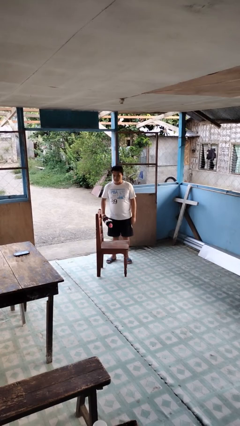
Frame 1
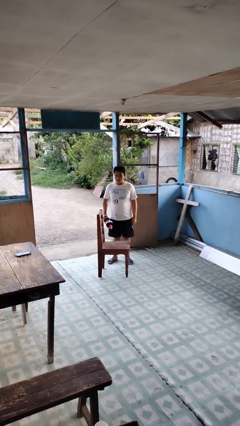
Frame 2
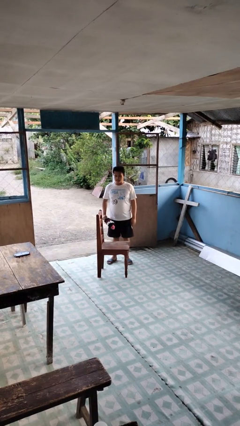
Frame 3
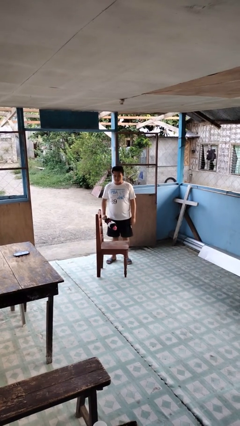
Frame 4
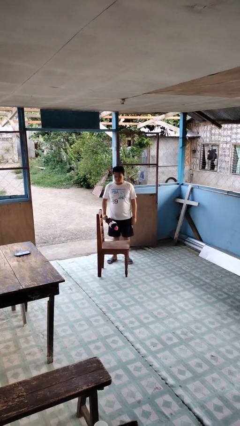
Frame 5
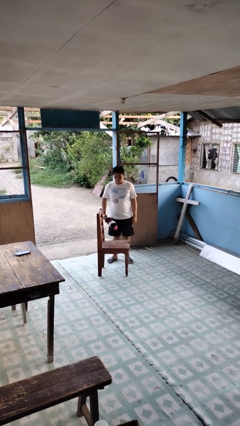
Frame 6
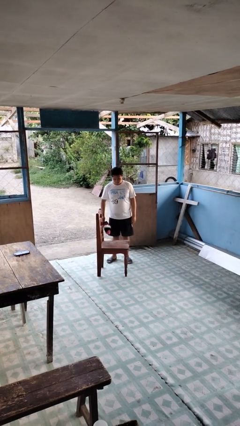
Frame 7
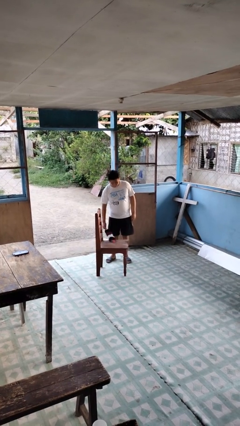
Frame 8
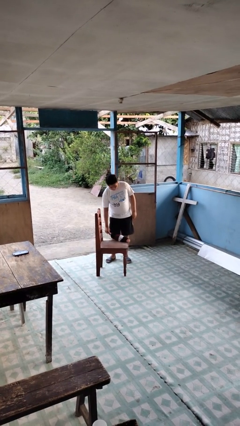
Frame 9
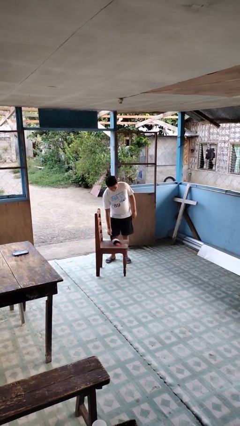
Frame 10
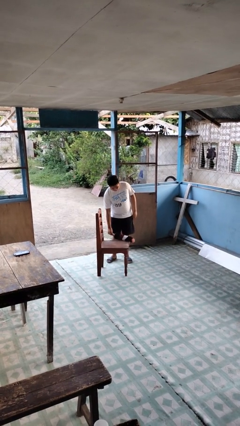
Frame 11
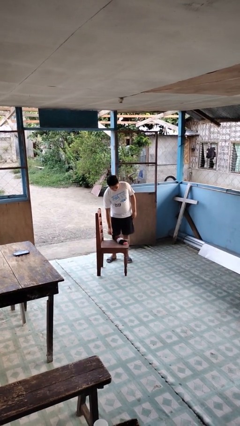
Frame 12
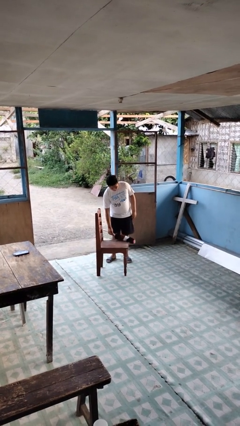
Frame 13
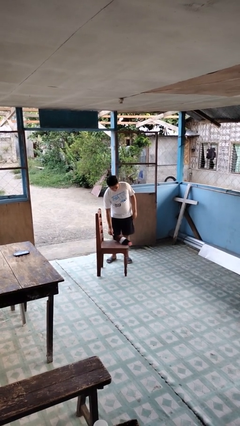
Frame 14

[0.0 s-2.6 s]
person dusts furniture

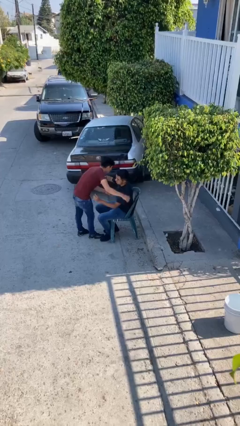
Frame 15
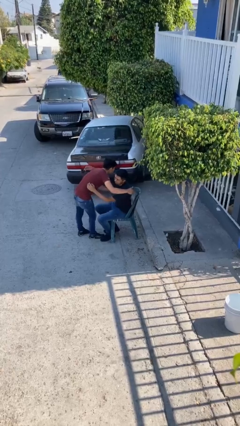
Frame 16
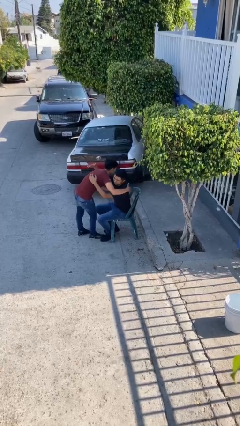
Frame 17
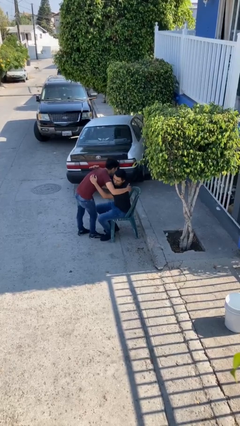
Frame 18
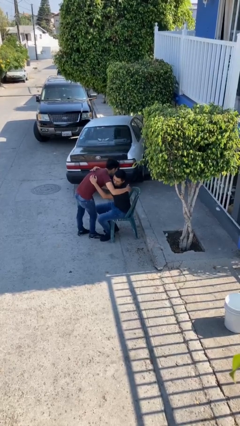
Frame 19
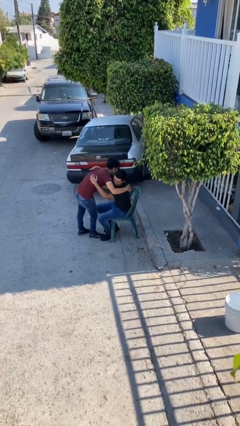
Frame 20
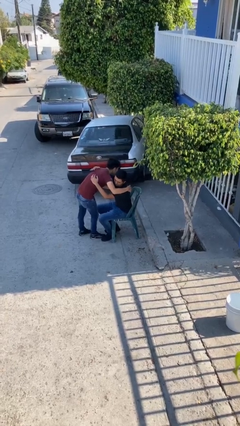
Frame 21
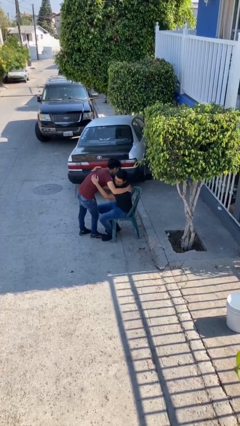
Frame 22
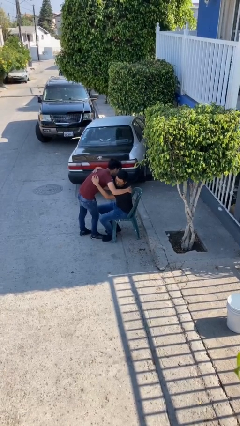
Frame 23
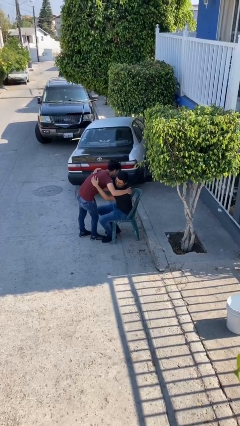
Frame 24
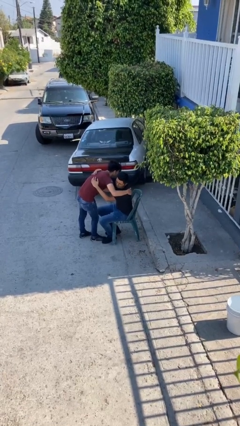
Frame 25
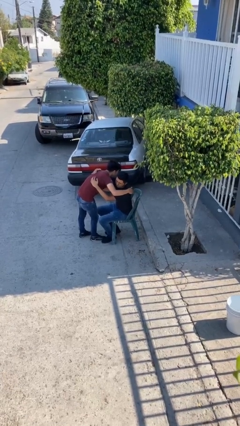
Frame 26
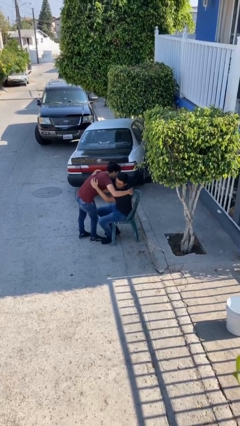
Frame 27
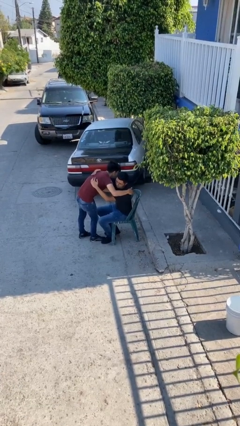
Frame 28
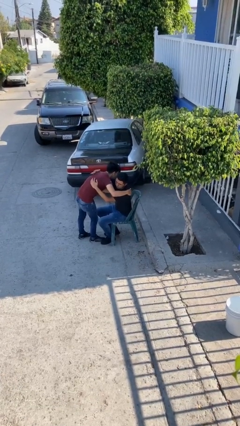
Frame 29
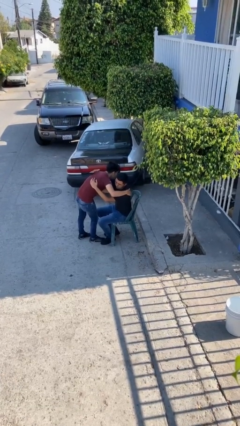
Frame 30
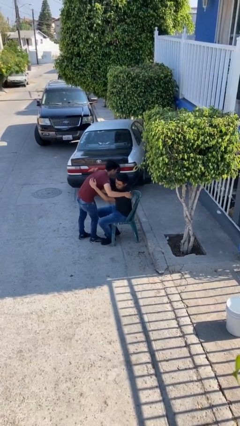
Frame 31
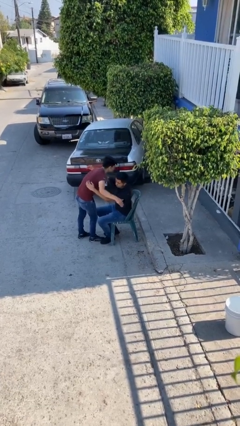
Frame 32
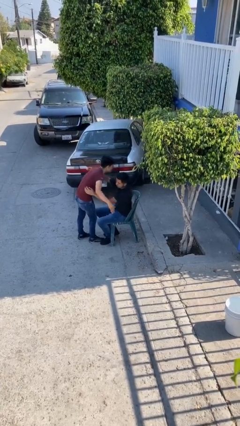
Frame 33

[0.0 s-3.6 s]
person embraces person

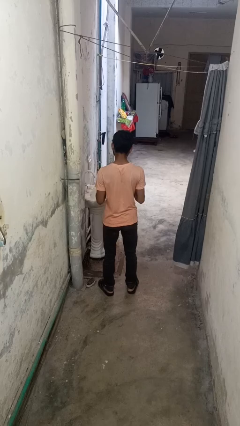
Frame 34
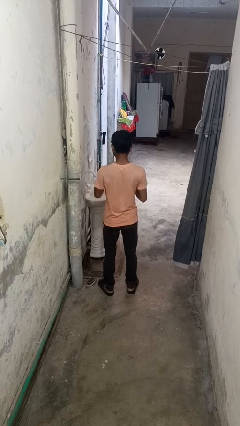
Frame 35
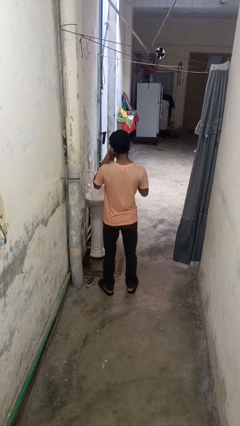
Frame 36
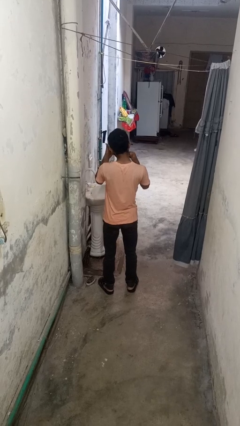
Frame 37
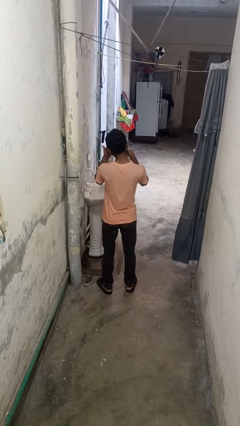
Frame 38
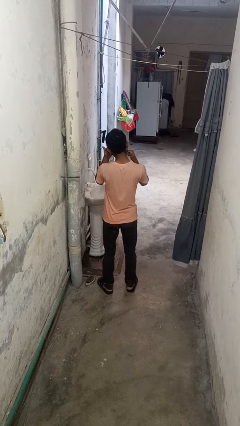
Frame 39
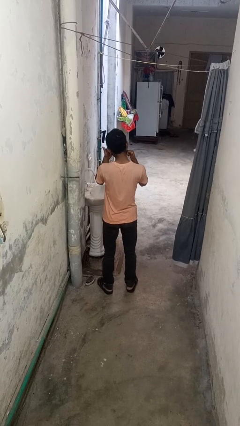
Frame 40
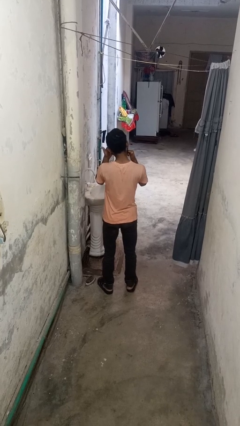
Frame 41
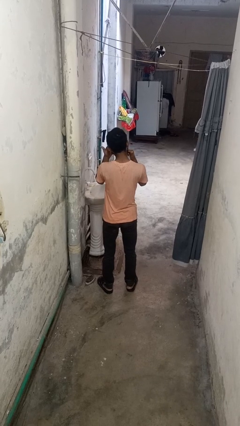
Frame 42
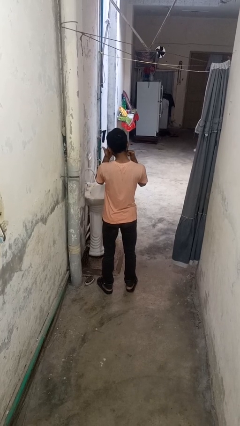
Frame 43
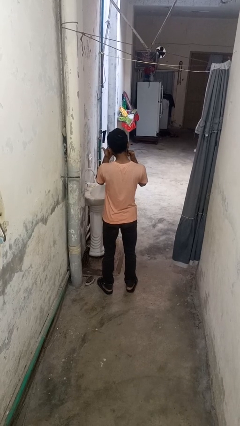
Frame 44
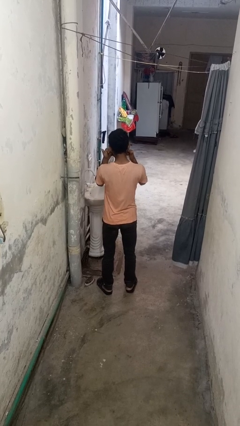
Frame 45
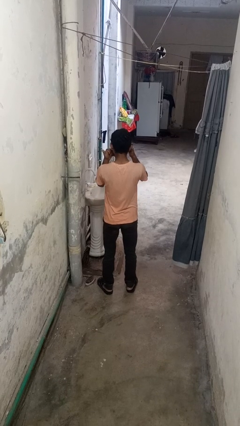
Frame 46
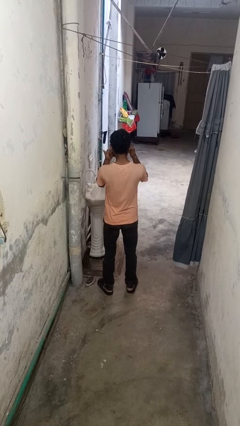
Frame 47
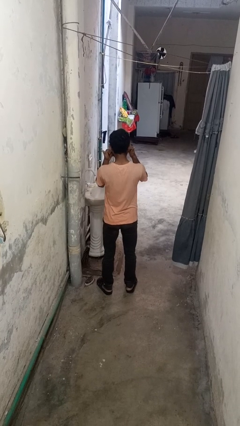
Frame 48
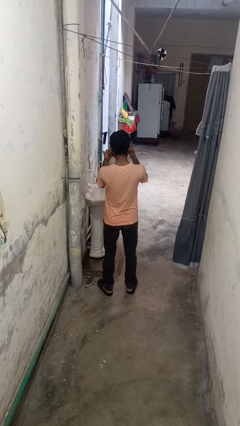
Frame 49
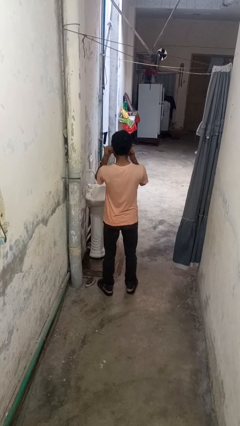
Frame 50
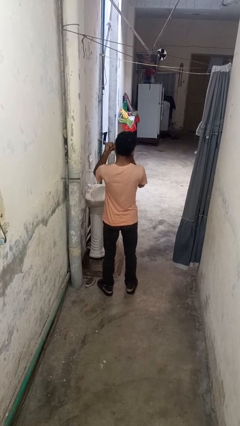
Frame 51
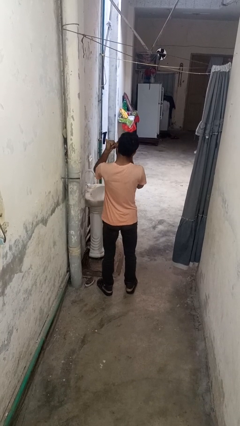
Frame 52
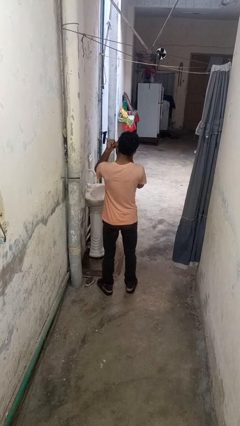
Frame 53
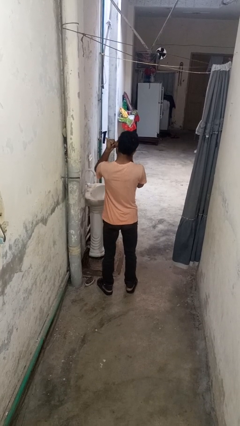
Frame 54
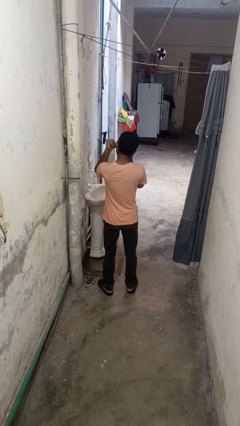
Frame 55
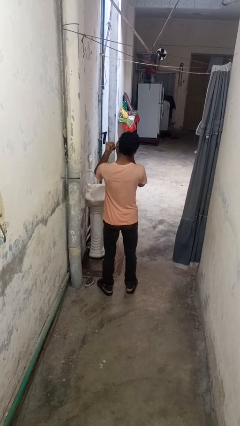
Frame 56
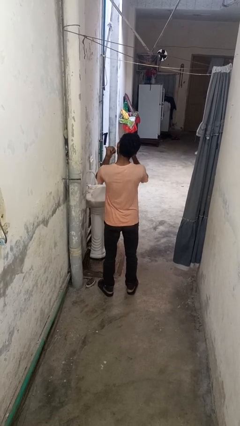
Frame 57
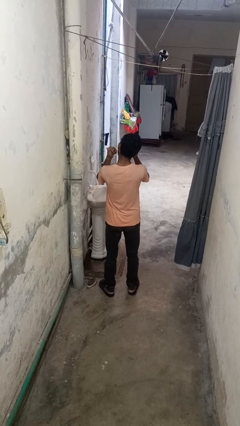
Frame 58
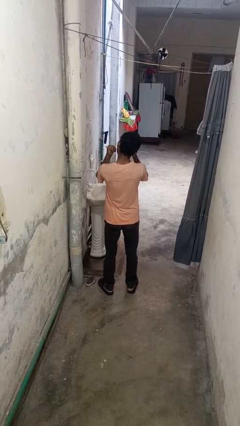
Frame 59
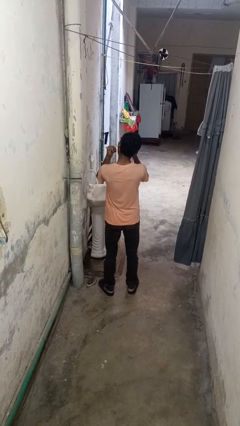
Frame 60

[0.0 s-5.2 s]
person flosses

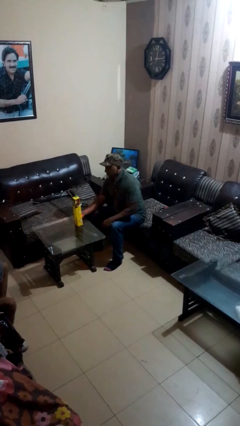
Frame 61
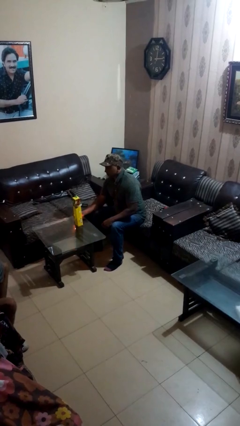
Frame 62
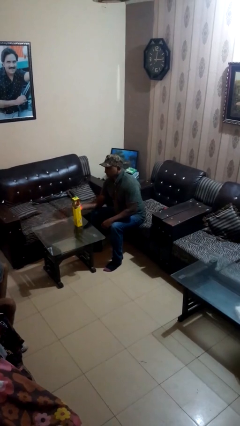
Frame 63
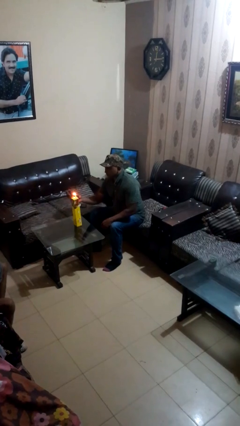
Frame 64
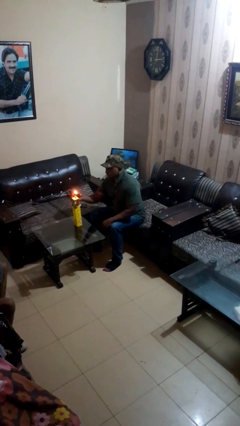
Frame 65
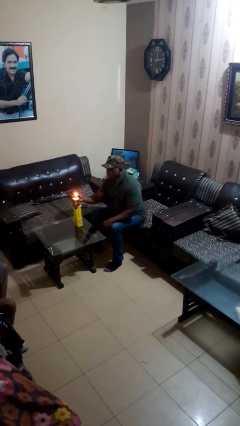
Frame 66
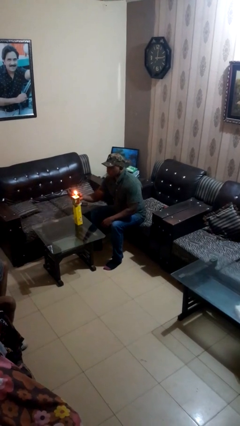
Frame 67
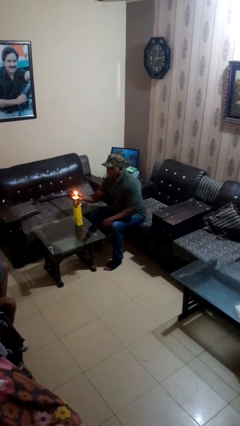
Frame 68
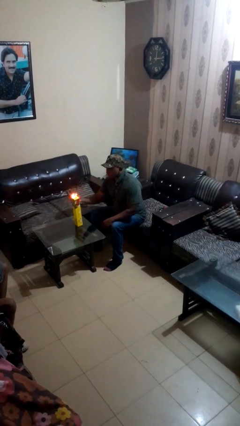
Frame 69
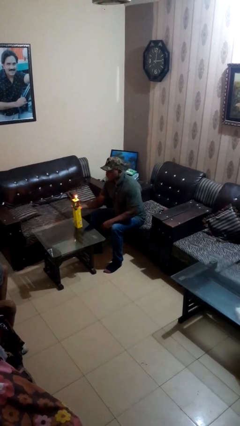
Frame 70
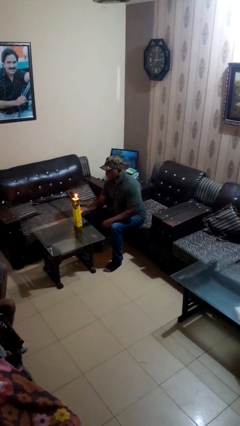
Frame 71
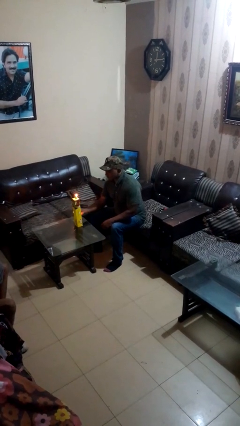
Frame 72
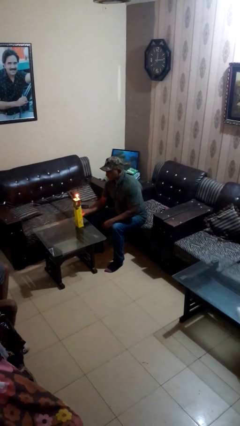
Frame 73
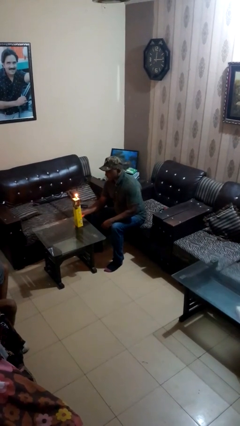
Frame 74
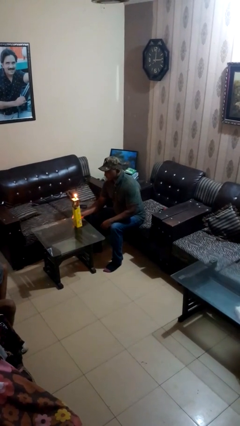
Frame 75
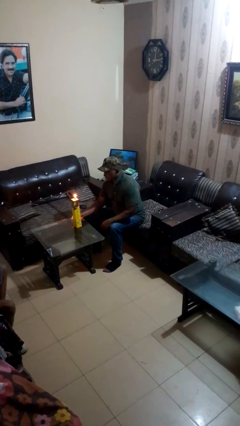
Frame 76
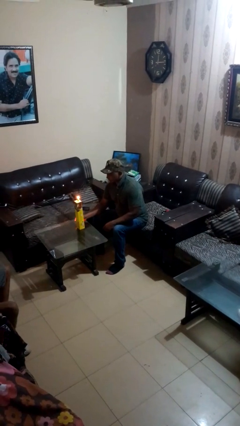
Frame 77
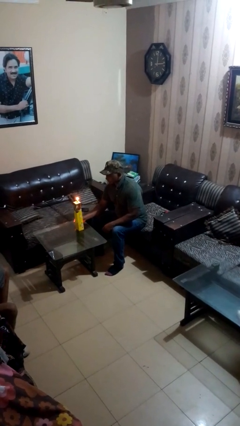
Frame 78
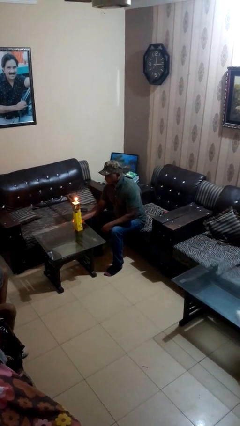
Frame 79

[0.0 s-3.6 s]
person lights candle

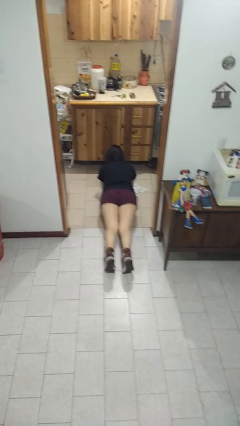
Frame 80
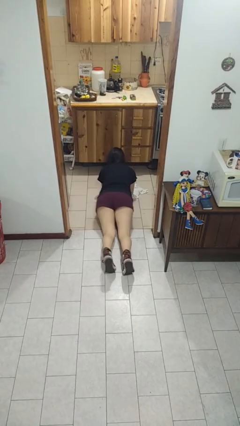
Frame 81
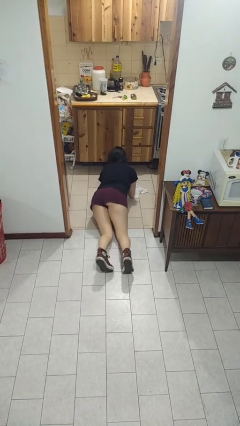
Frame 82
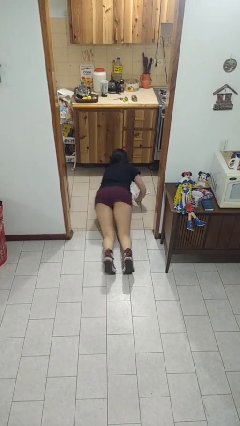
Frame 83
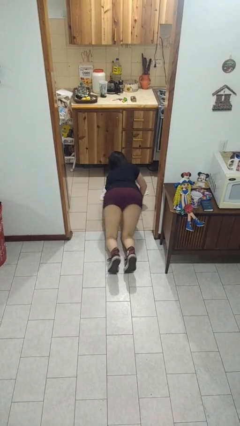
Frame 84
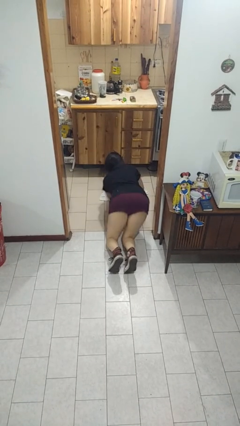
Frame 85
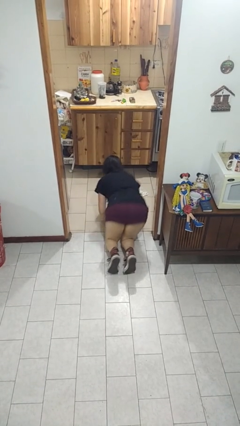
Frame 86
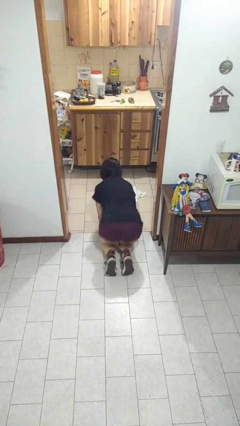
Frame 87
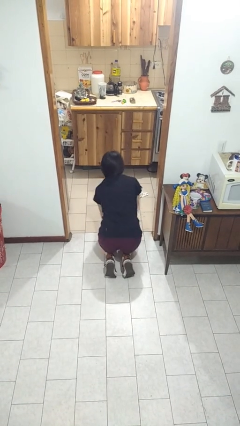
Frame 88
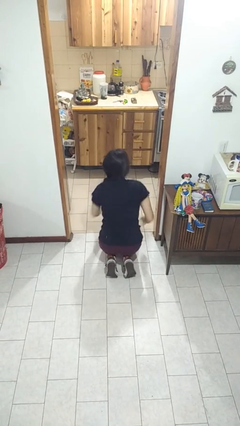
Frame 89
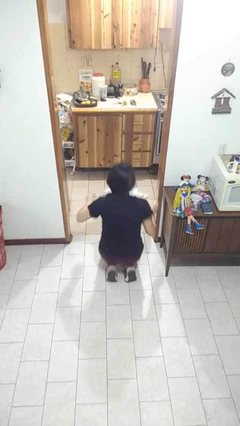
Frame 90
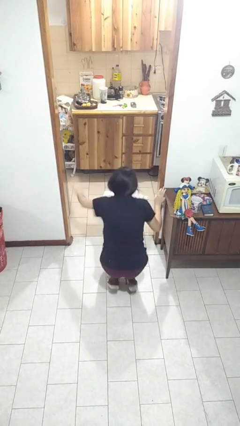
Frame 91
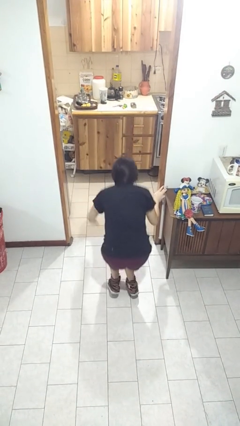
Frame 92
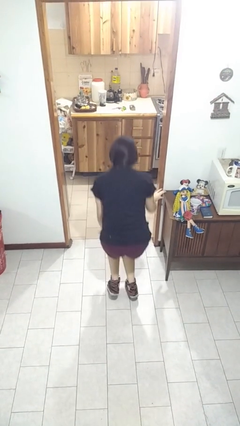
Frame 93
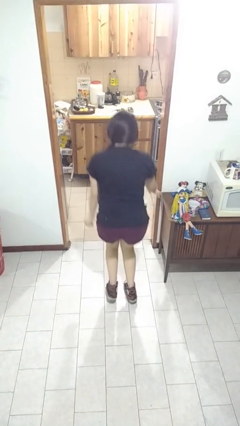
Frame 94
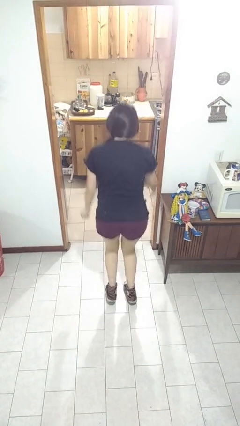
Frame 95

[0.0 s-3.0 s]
person stands up from floor
